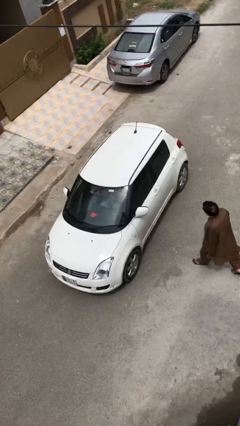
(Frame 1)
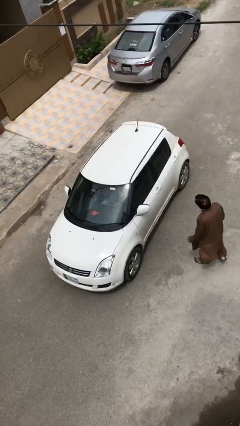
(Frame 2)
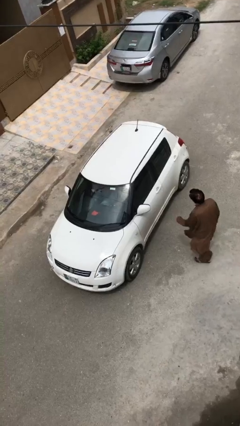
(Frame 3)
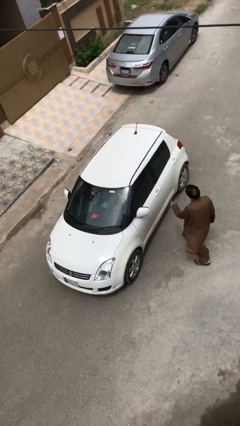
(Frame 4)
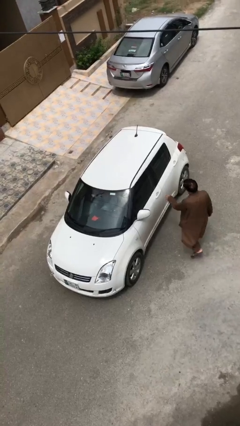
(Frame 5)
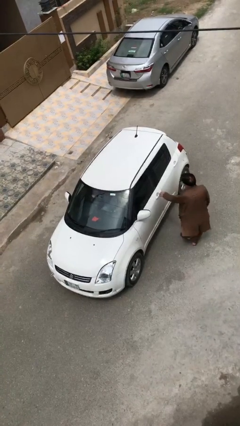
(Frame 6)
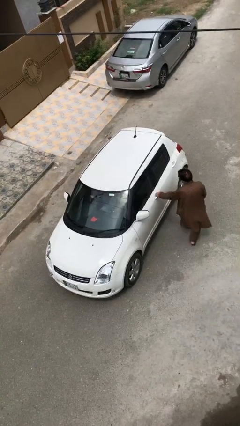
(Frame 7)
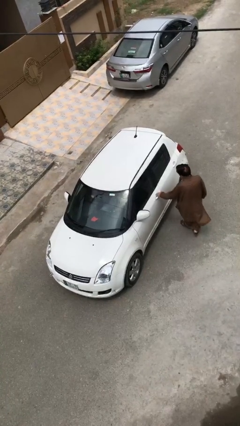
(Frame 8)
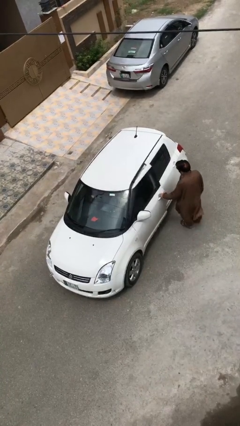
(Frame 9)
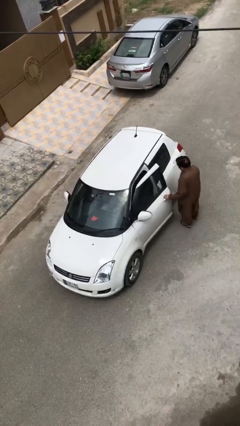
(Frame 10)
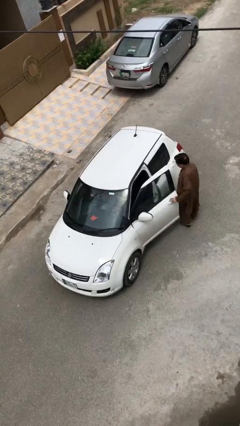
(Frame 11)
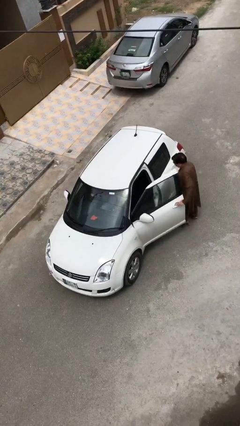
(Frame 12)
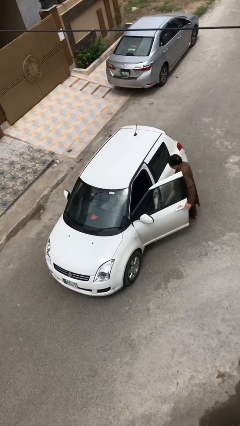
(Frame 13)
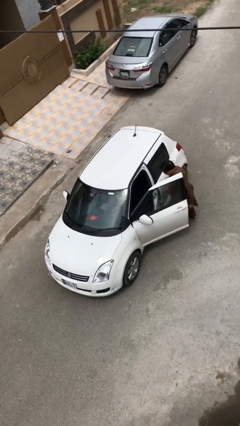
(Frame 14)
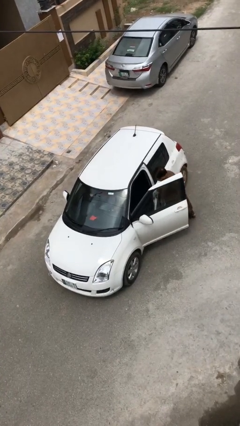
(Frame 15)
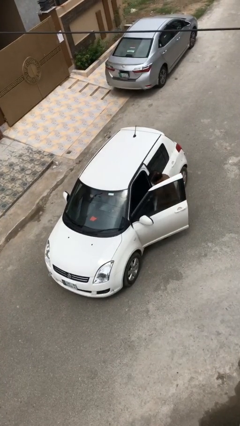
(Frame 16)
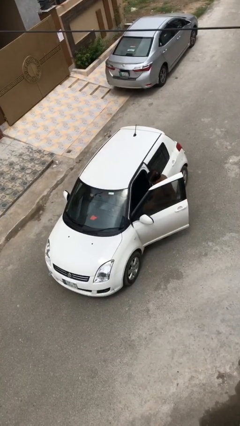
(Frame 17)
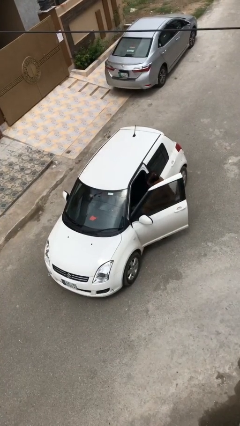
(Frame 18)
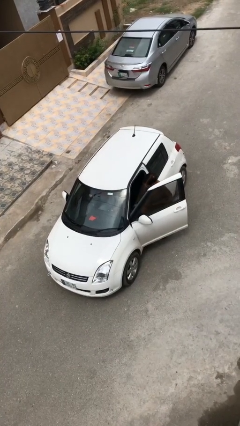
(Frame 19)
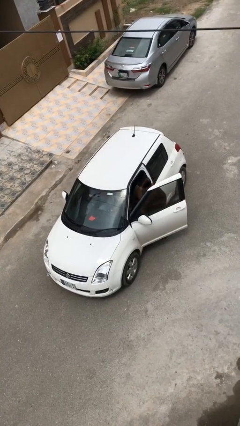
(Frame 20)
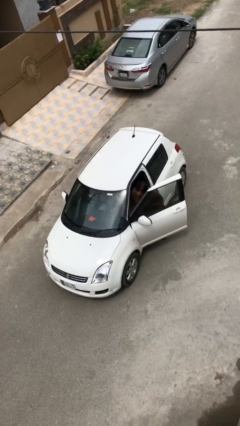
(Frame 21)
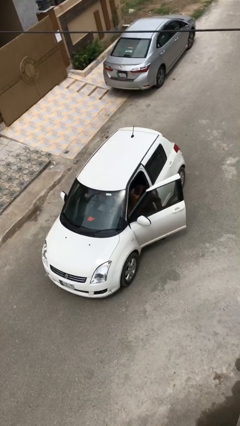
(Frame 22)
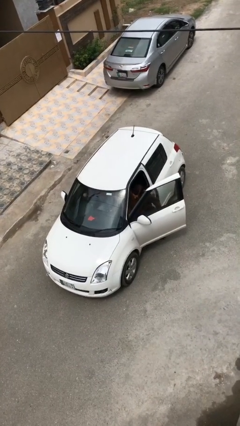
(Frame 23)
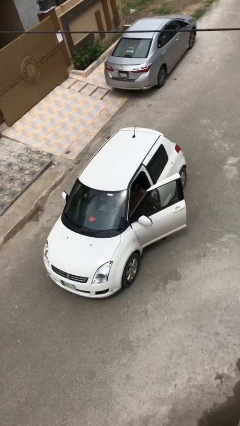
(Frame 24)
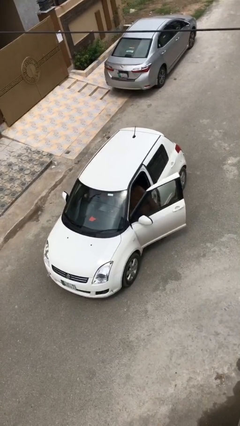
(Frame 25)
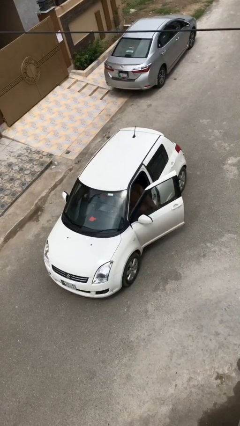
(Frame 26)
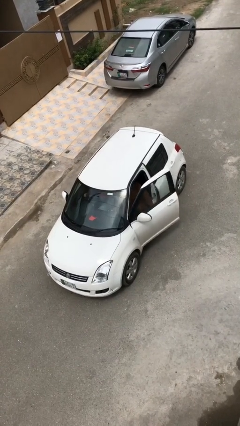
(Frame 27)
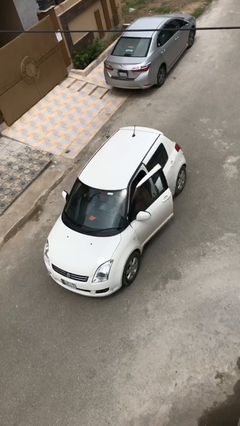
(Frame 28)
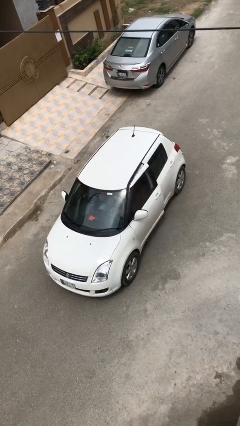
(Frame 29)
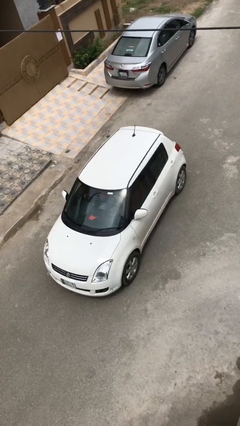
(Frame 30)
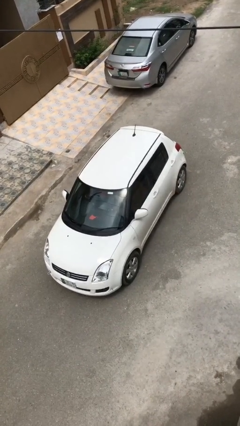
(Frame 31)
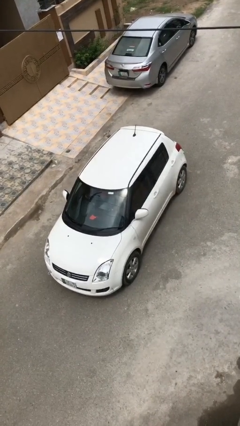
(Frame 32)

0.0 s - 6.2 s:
car picks up person

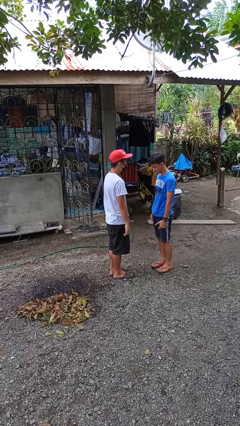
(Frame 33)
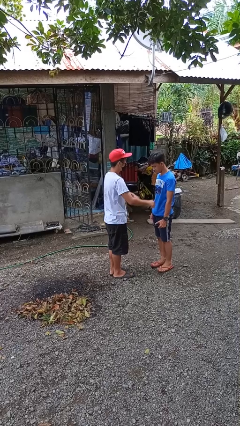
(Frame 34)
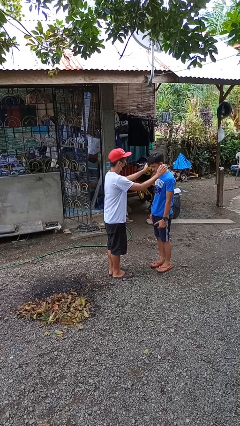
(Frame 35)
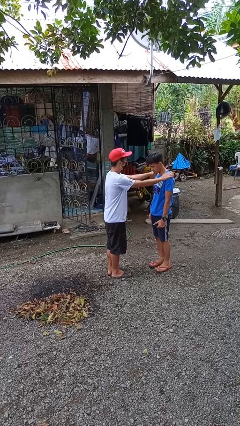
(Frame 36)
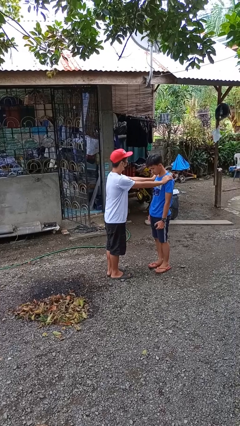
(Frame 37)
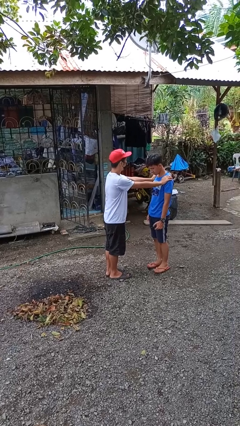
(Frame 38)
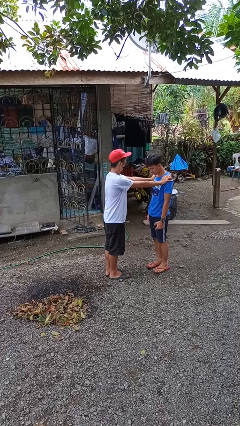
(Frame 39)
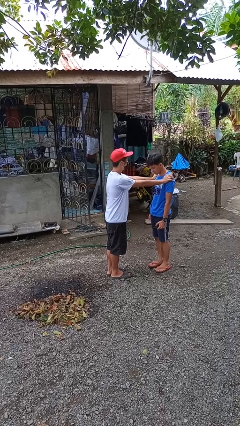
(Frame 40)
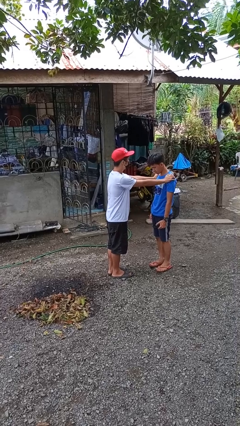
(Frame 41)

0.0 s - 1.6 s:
person grabs person by shoulder

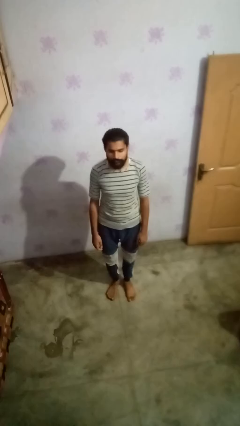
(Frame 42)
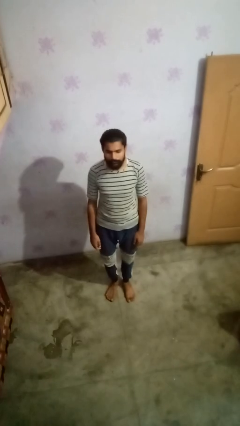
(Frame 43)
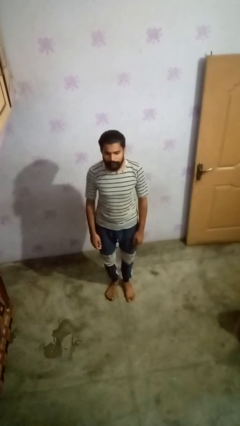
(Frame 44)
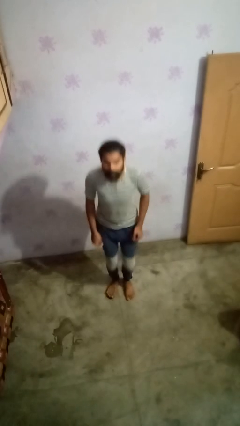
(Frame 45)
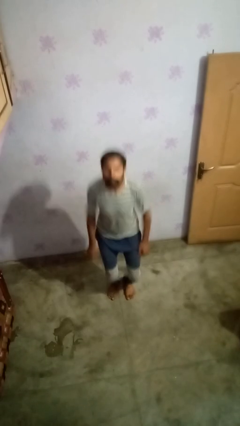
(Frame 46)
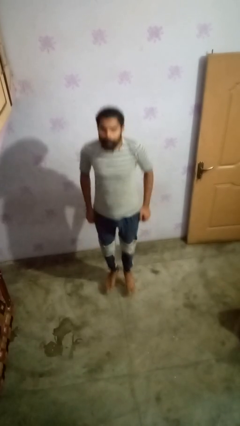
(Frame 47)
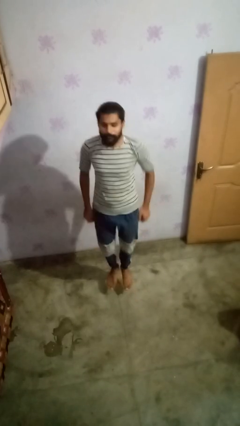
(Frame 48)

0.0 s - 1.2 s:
person jumps

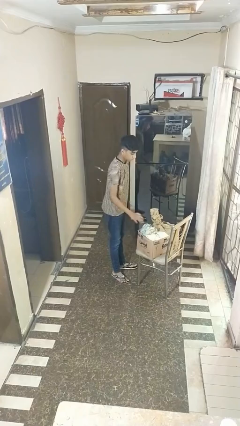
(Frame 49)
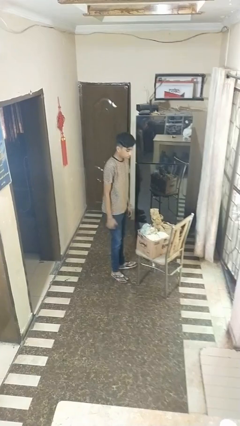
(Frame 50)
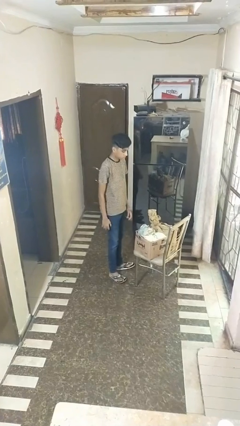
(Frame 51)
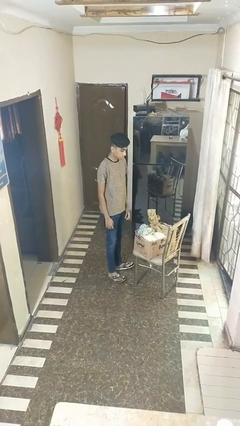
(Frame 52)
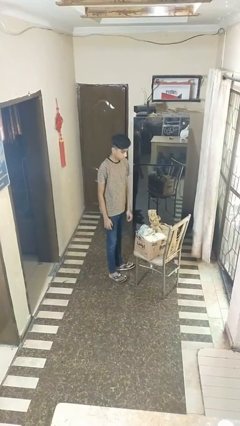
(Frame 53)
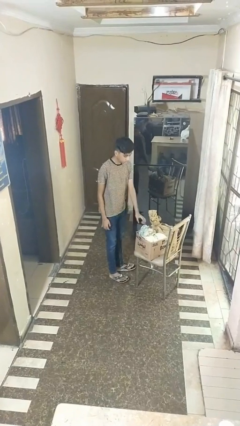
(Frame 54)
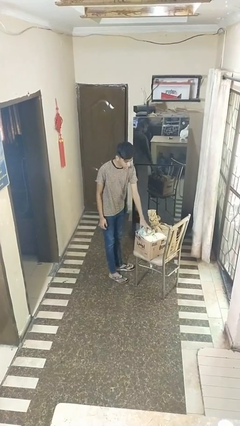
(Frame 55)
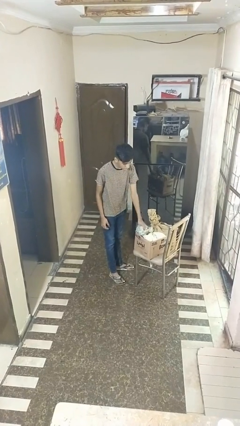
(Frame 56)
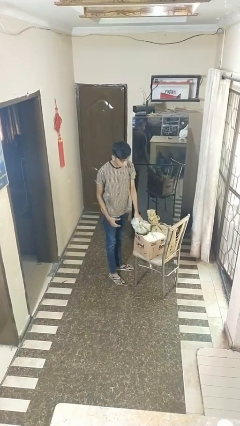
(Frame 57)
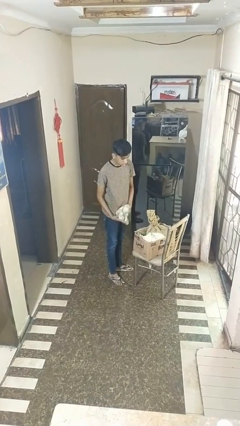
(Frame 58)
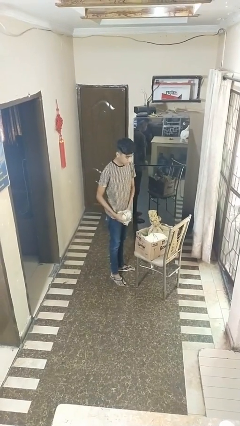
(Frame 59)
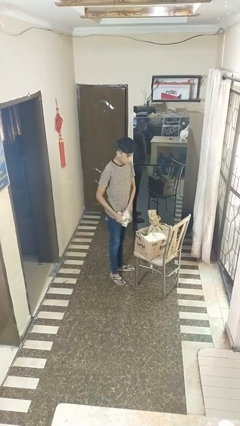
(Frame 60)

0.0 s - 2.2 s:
person takes object from box

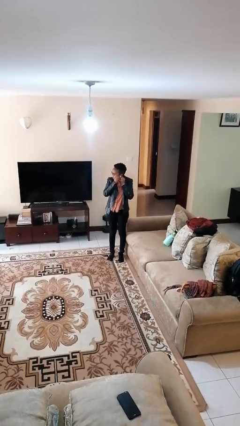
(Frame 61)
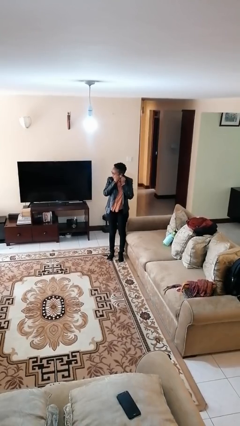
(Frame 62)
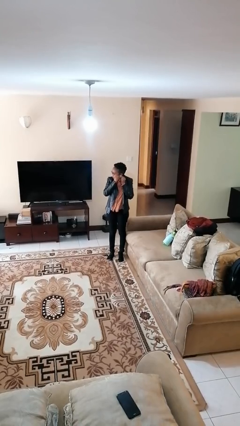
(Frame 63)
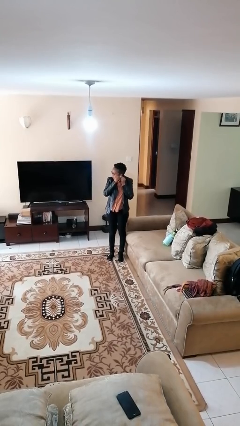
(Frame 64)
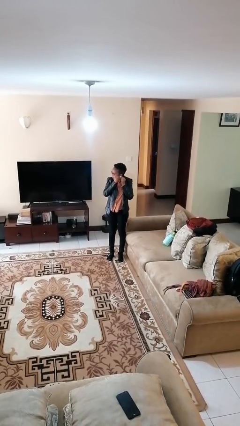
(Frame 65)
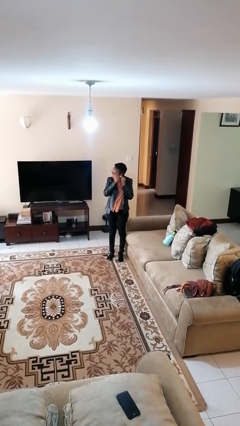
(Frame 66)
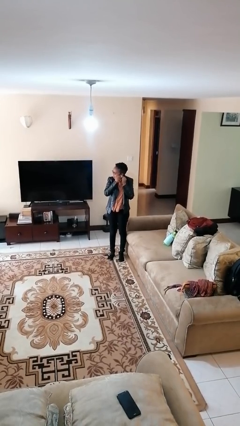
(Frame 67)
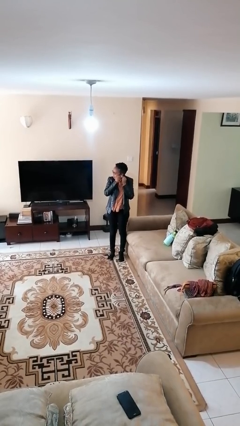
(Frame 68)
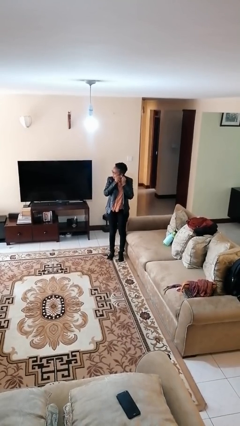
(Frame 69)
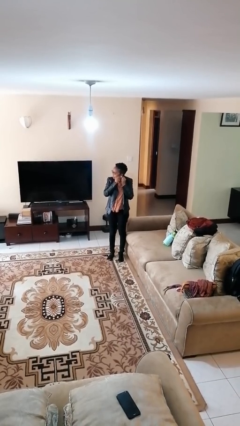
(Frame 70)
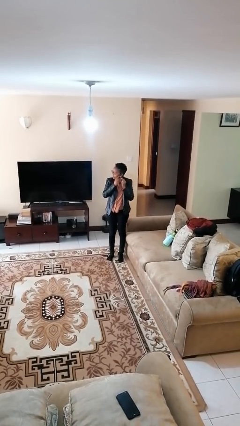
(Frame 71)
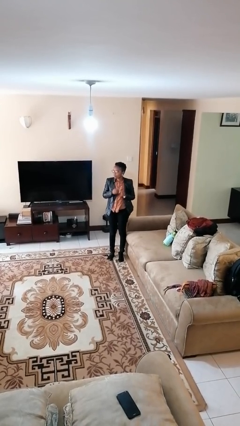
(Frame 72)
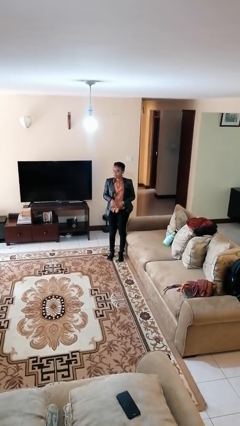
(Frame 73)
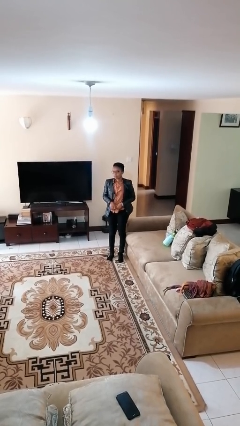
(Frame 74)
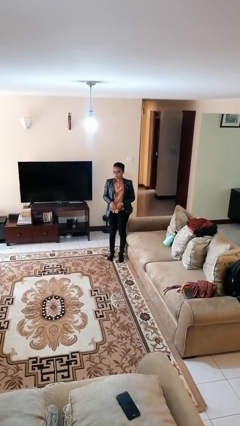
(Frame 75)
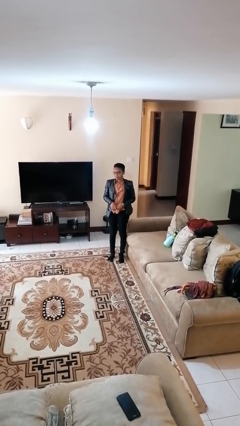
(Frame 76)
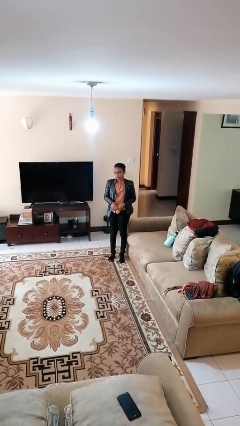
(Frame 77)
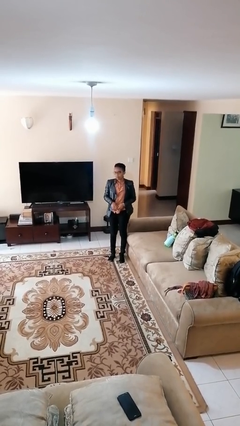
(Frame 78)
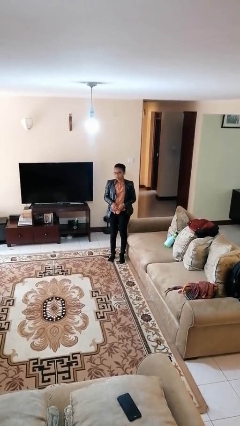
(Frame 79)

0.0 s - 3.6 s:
person puts on earrings

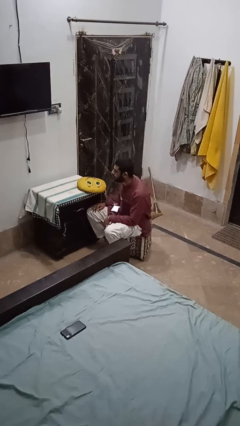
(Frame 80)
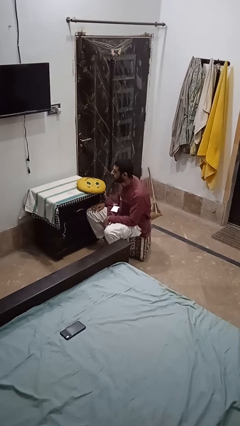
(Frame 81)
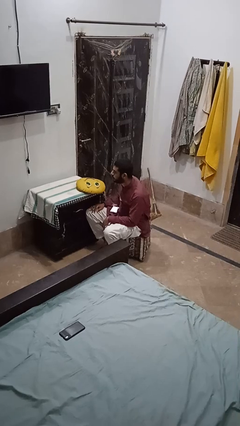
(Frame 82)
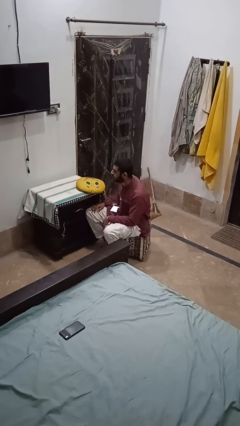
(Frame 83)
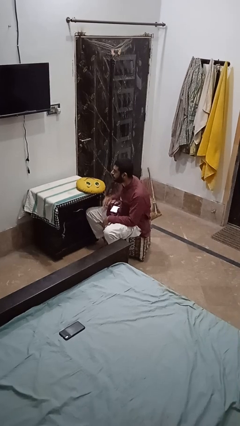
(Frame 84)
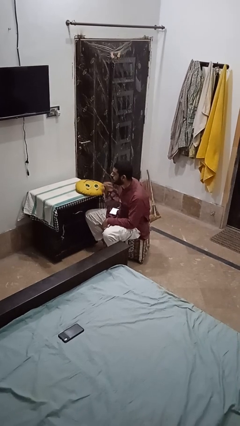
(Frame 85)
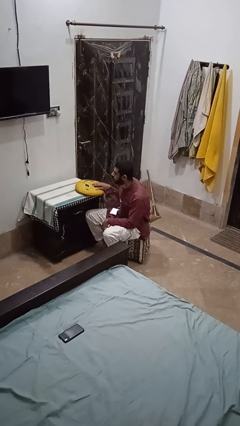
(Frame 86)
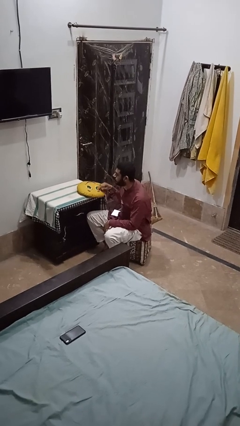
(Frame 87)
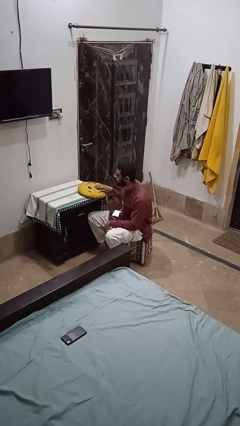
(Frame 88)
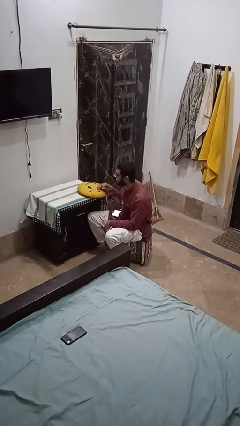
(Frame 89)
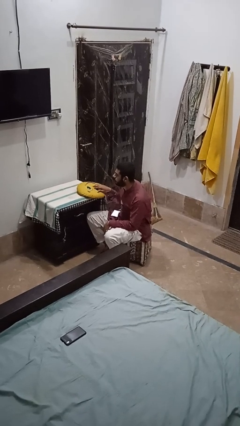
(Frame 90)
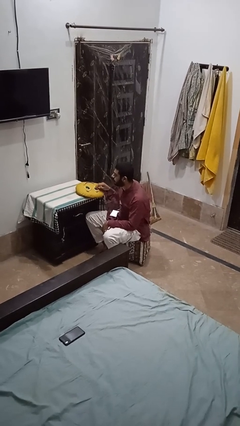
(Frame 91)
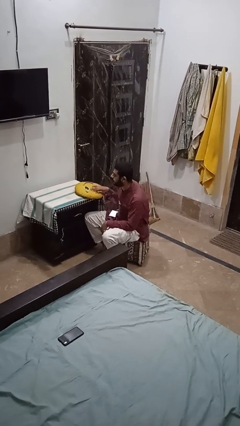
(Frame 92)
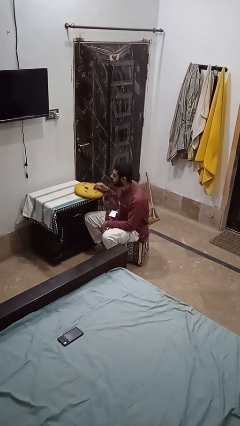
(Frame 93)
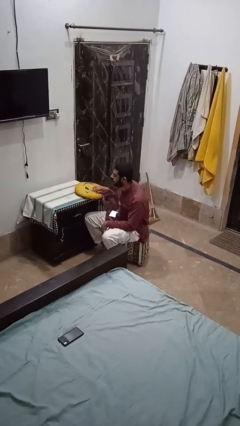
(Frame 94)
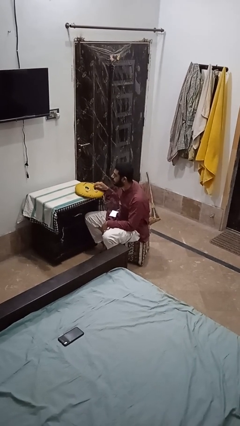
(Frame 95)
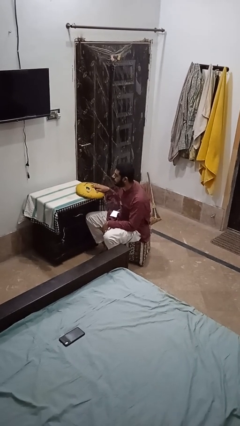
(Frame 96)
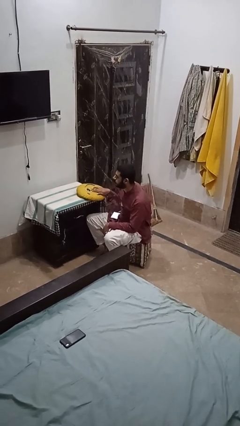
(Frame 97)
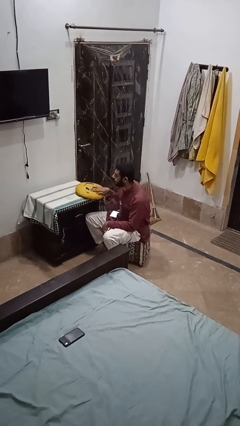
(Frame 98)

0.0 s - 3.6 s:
person waves hand over object
